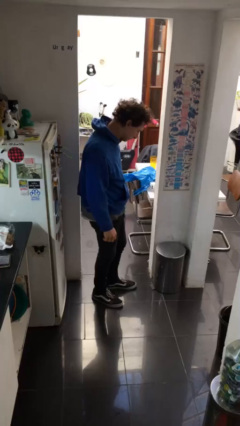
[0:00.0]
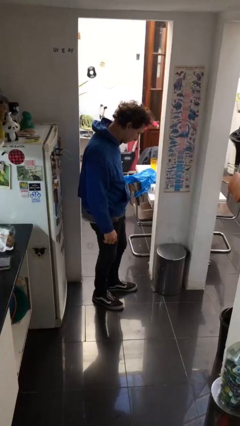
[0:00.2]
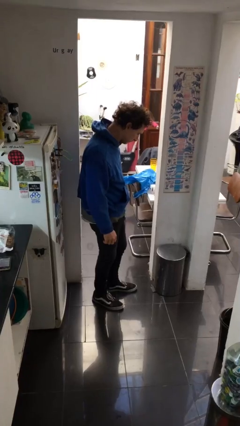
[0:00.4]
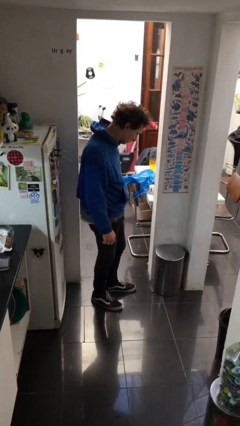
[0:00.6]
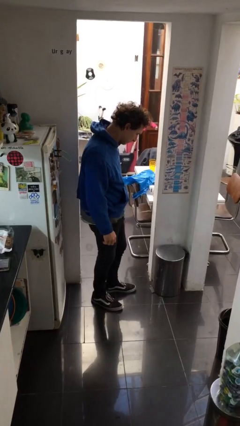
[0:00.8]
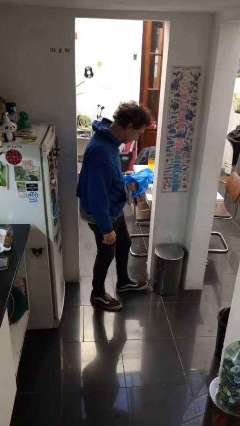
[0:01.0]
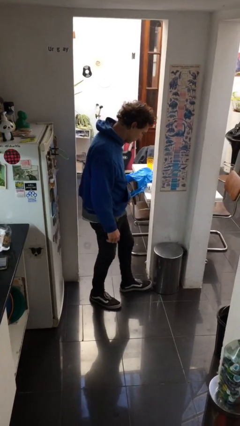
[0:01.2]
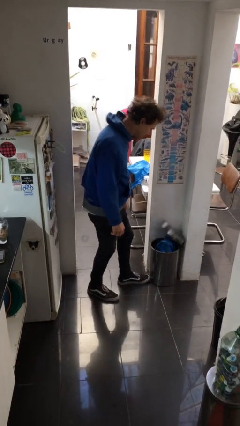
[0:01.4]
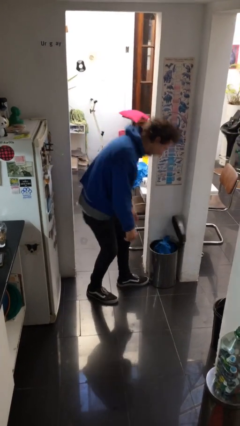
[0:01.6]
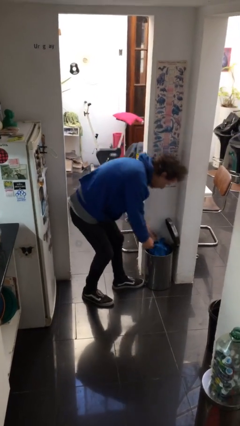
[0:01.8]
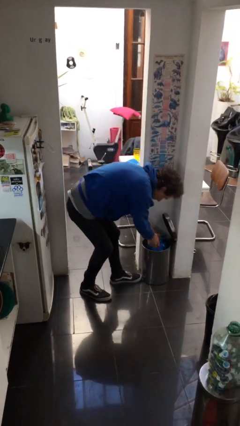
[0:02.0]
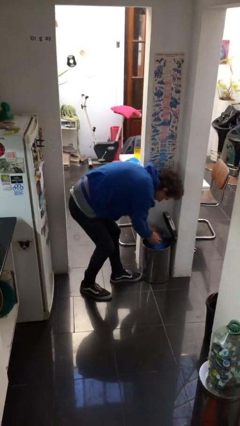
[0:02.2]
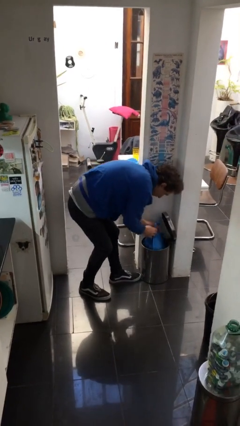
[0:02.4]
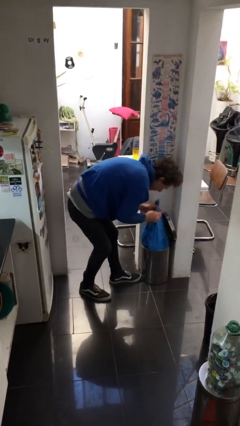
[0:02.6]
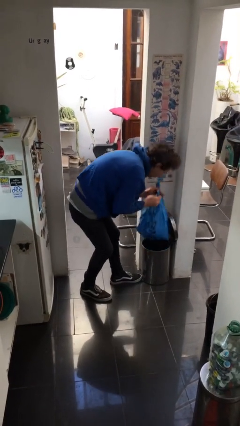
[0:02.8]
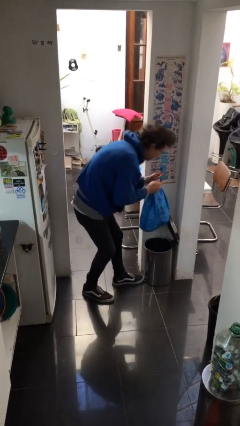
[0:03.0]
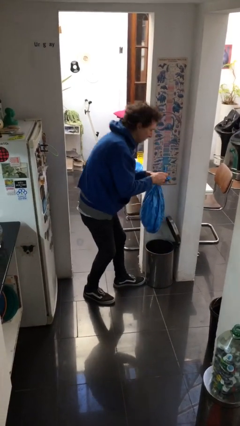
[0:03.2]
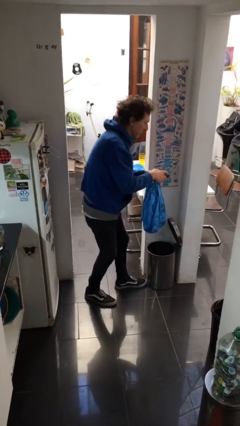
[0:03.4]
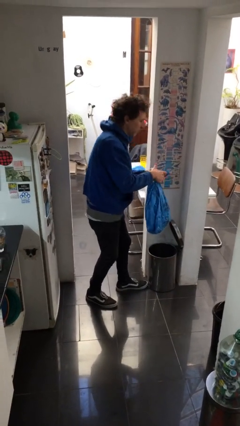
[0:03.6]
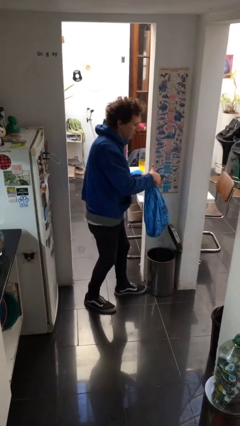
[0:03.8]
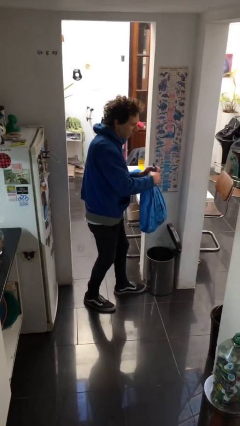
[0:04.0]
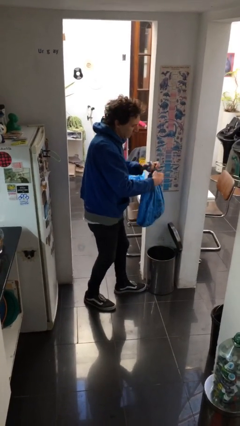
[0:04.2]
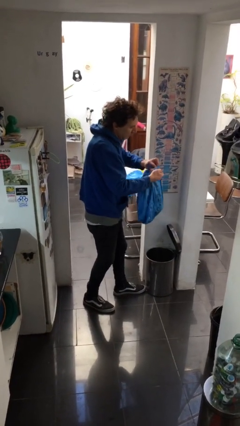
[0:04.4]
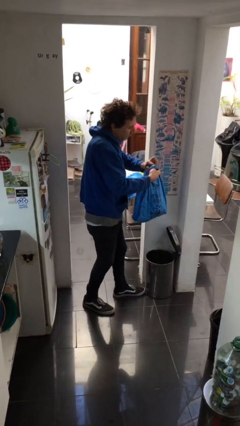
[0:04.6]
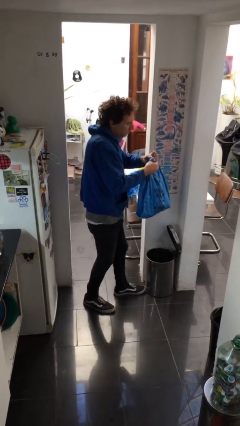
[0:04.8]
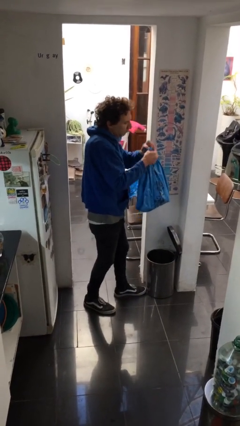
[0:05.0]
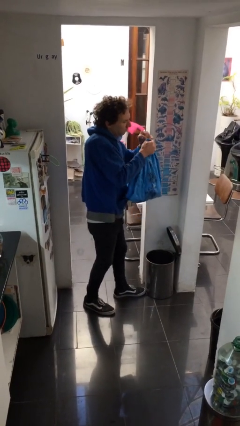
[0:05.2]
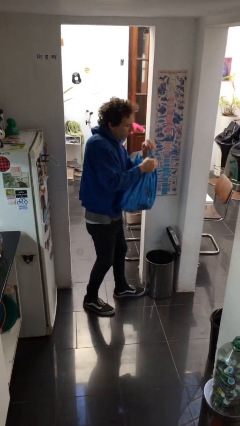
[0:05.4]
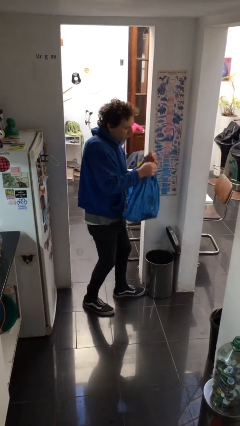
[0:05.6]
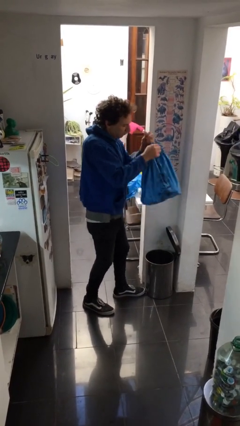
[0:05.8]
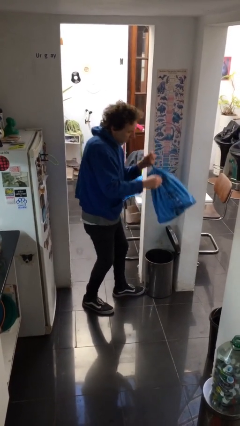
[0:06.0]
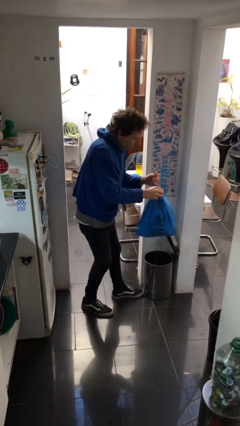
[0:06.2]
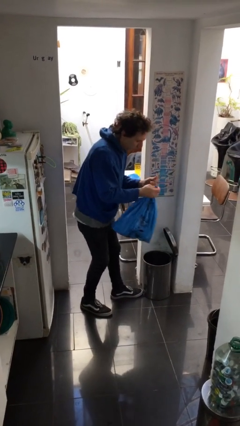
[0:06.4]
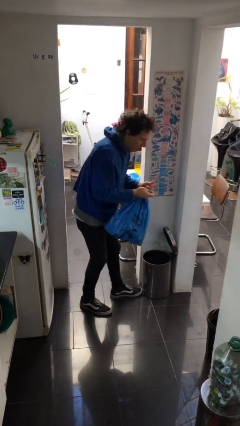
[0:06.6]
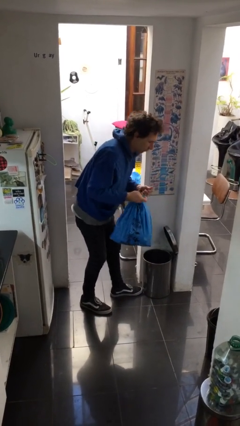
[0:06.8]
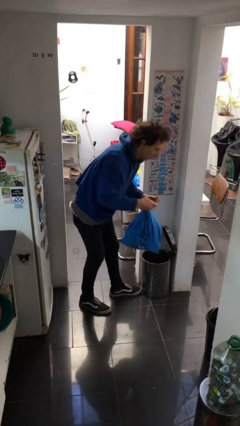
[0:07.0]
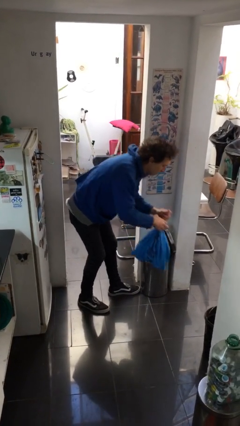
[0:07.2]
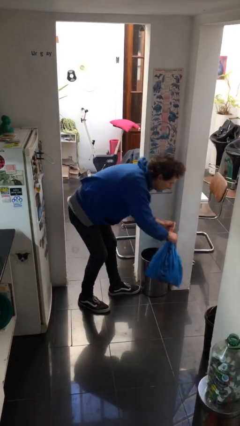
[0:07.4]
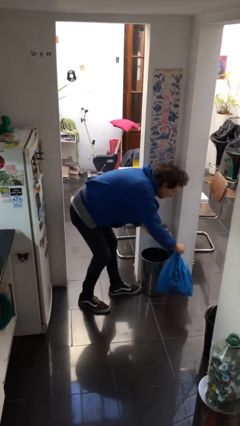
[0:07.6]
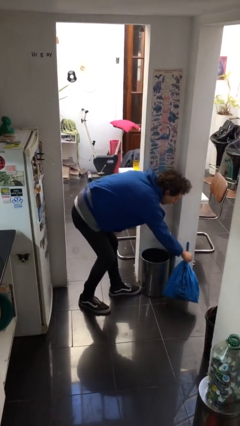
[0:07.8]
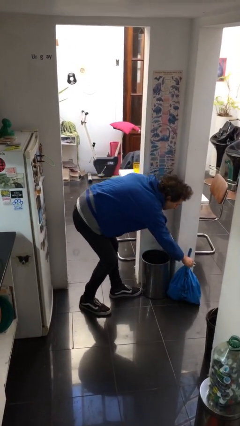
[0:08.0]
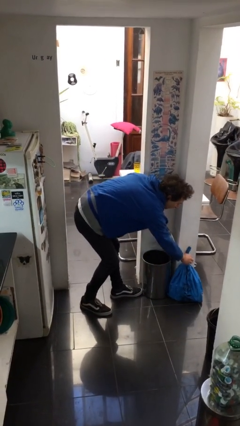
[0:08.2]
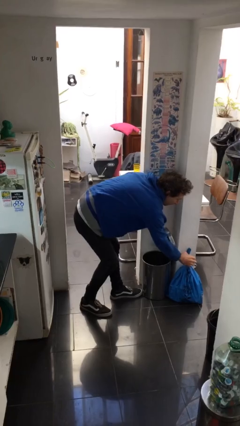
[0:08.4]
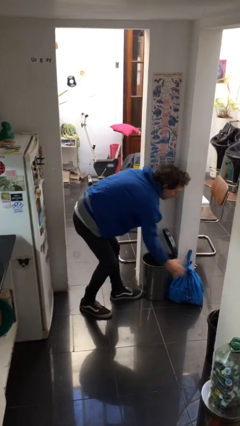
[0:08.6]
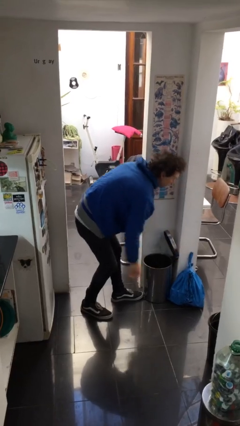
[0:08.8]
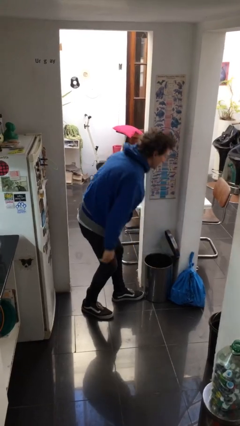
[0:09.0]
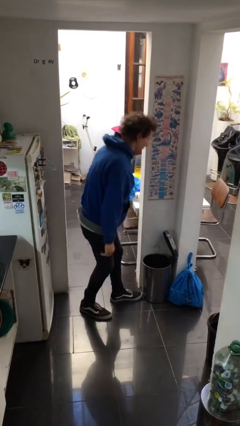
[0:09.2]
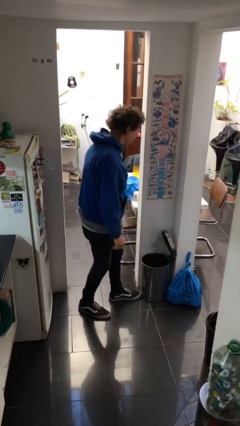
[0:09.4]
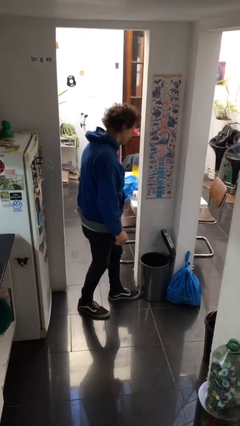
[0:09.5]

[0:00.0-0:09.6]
person removes trashbag from trashcan

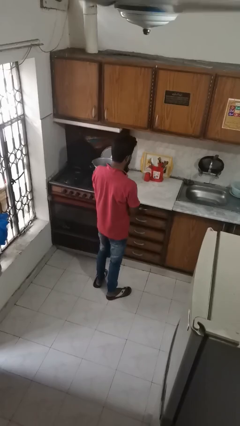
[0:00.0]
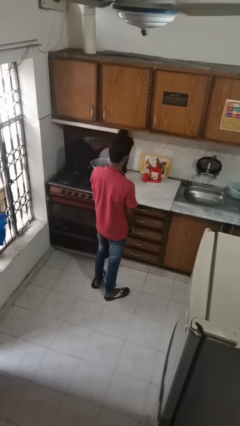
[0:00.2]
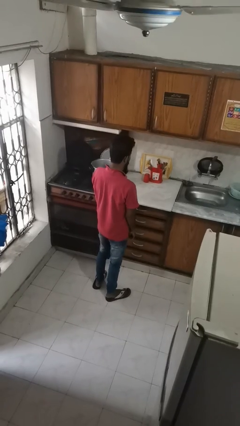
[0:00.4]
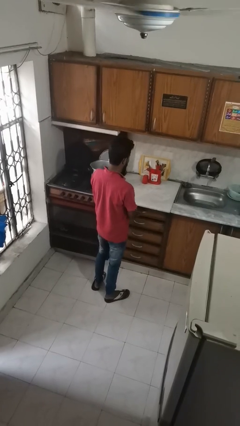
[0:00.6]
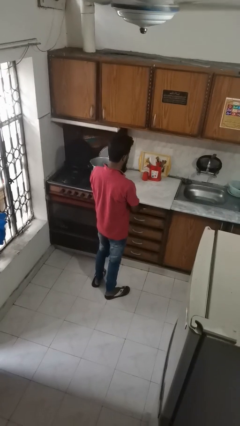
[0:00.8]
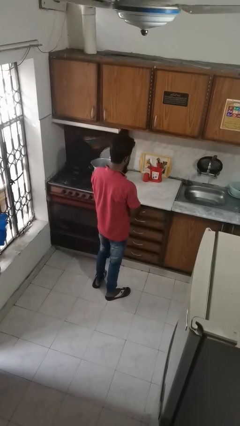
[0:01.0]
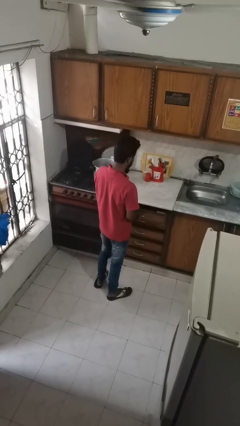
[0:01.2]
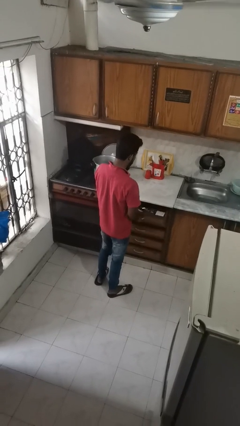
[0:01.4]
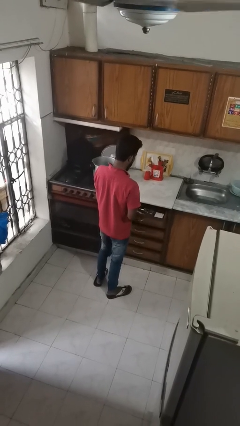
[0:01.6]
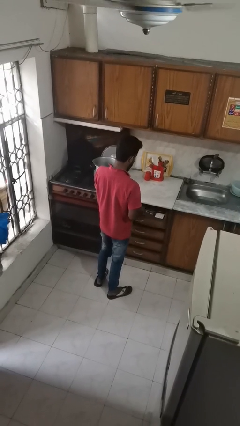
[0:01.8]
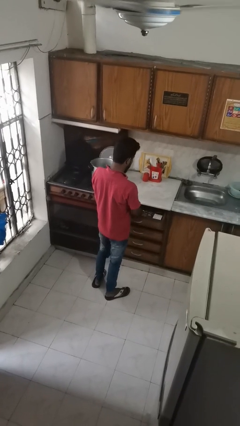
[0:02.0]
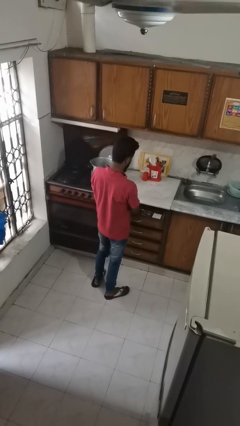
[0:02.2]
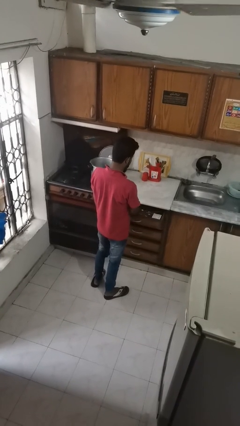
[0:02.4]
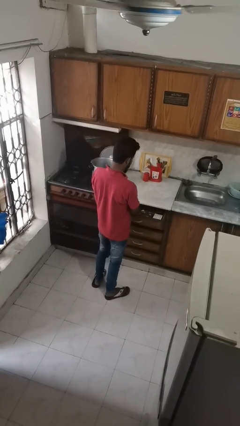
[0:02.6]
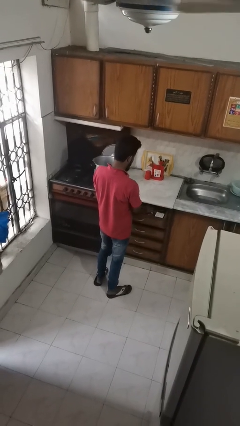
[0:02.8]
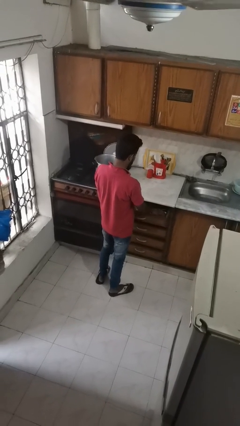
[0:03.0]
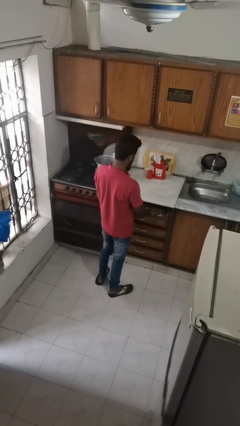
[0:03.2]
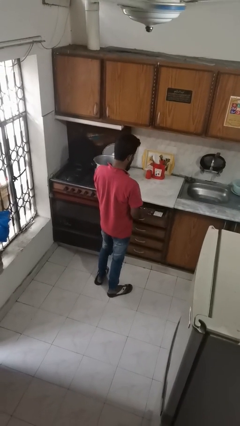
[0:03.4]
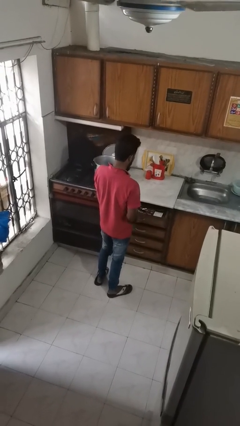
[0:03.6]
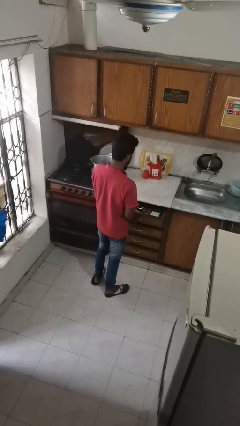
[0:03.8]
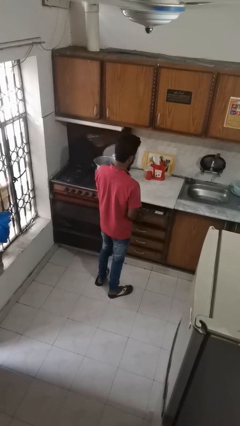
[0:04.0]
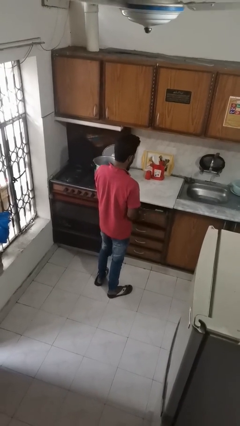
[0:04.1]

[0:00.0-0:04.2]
person searches in kitchen drawer

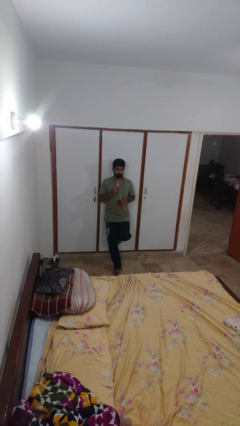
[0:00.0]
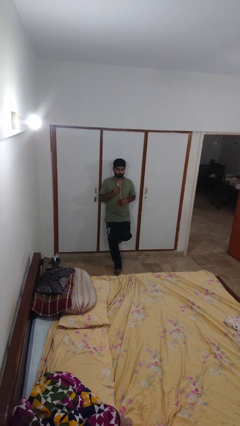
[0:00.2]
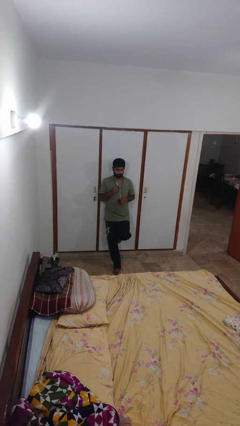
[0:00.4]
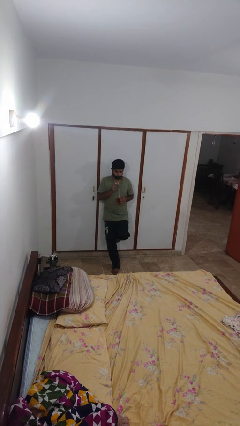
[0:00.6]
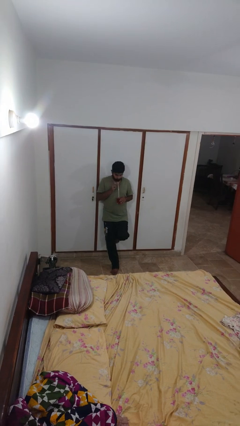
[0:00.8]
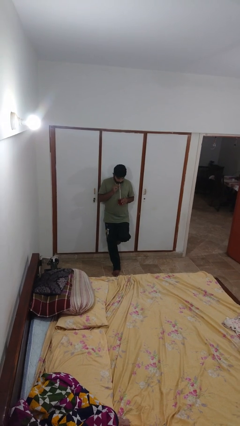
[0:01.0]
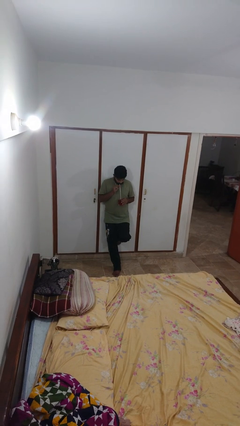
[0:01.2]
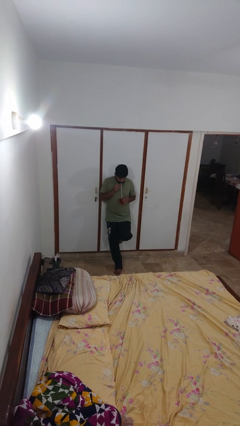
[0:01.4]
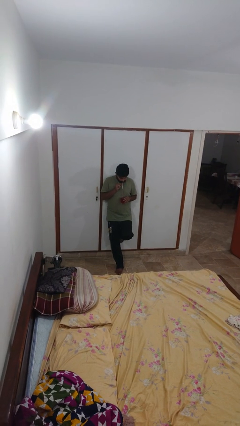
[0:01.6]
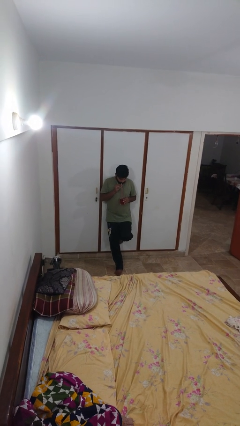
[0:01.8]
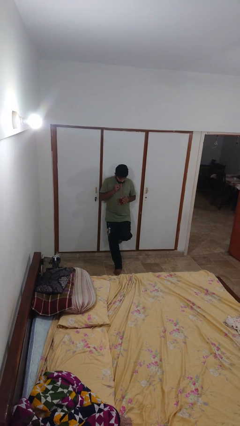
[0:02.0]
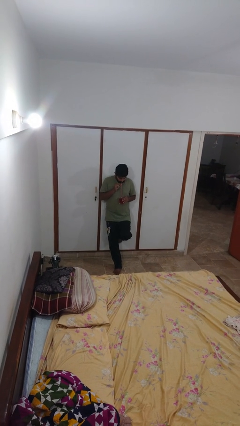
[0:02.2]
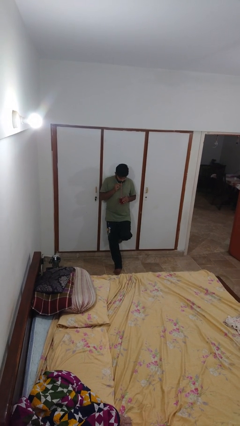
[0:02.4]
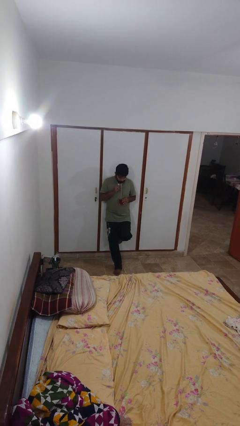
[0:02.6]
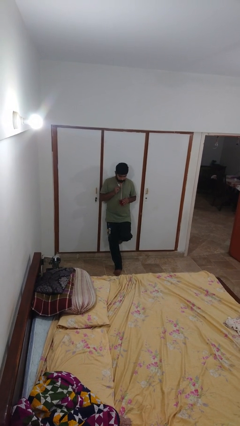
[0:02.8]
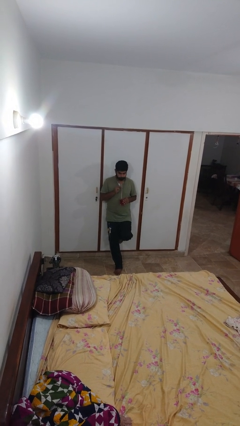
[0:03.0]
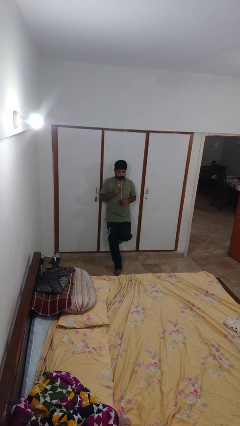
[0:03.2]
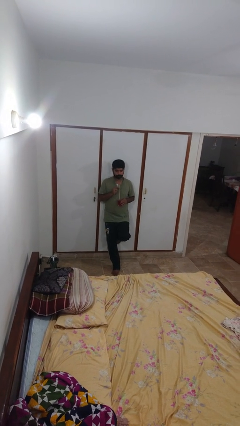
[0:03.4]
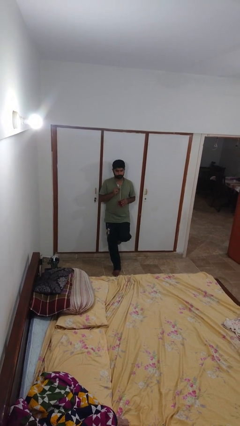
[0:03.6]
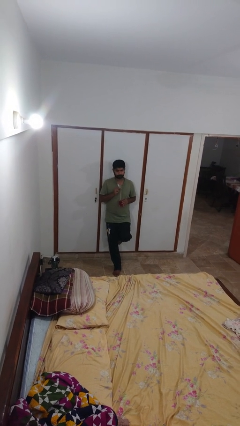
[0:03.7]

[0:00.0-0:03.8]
person drinks from straw

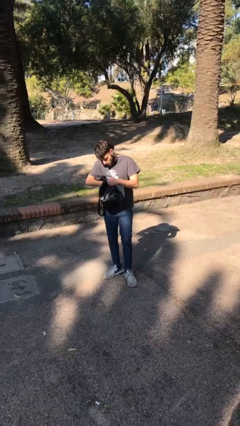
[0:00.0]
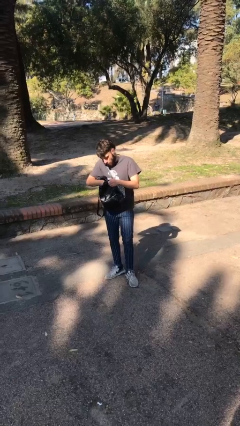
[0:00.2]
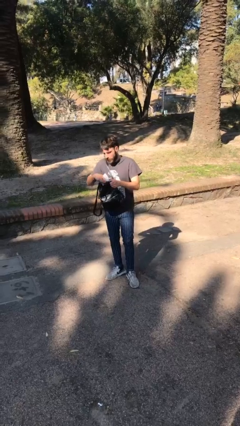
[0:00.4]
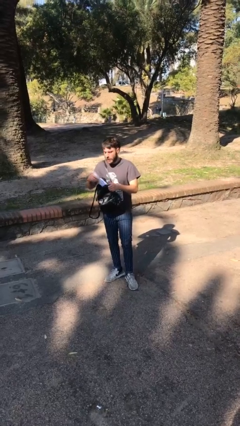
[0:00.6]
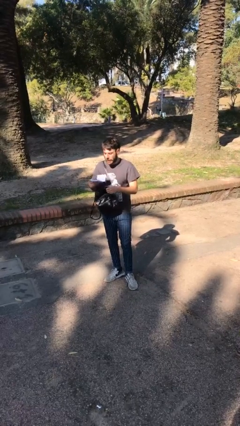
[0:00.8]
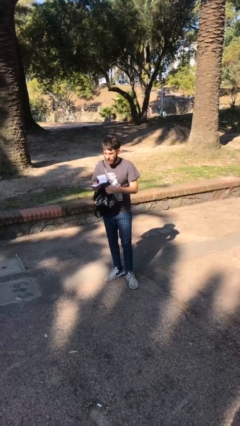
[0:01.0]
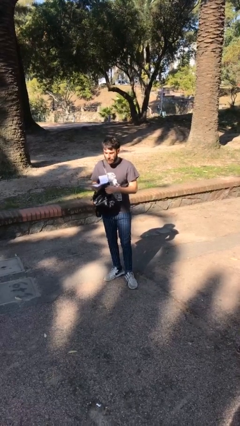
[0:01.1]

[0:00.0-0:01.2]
person takes object from backpack
